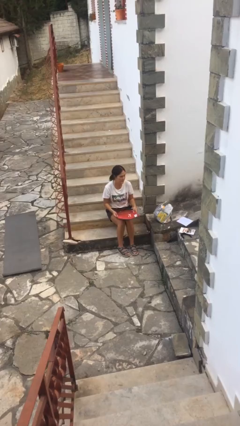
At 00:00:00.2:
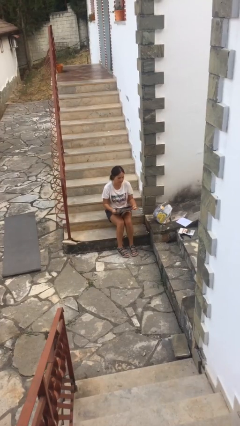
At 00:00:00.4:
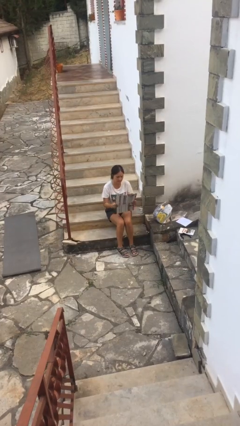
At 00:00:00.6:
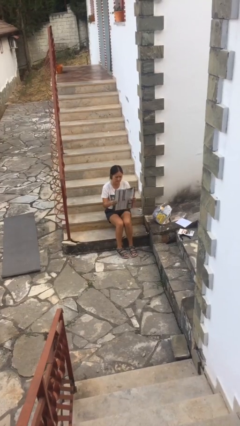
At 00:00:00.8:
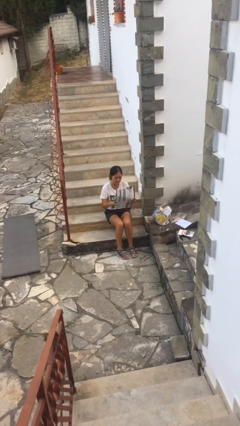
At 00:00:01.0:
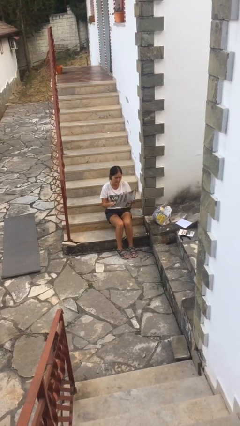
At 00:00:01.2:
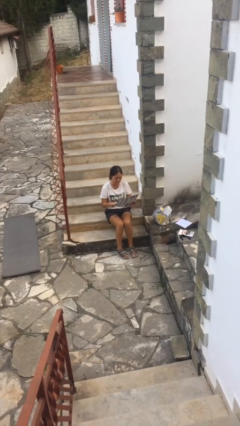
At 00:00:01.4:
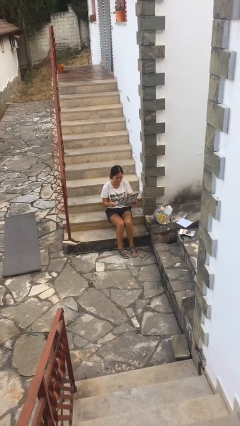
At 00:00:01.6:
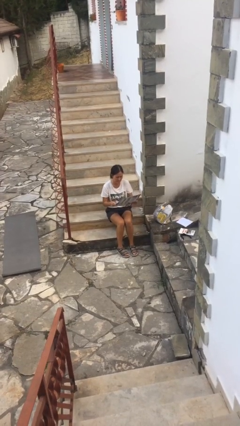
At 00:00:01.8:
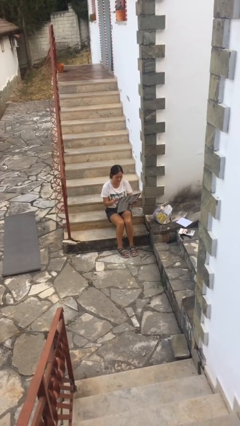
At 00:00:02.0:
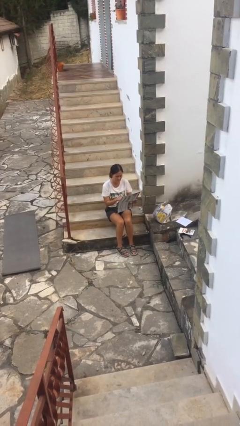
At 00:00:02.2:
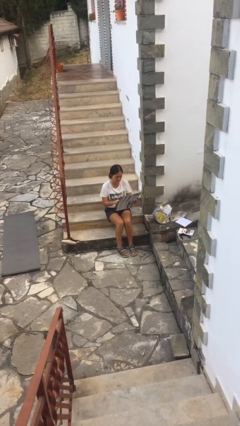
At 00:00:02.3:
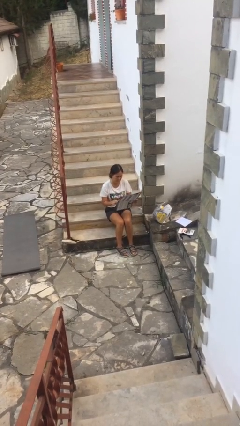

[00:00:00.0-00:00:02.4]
person reads newspaper

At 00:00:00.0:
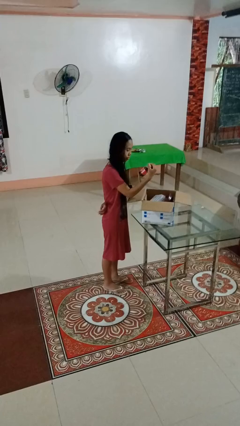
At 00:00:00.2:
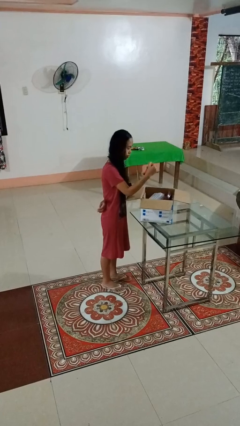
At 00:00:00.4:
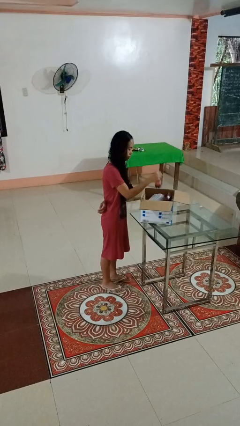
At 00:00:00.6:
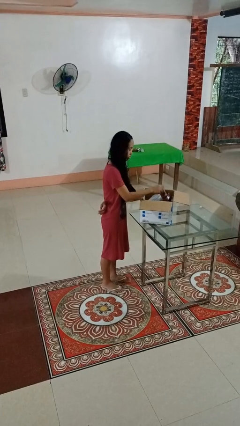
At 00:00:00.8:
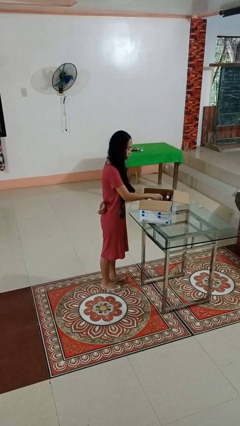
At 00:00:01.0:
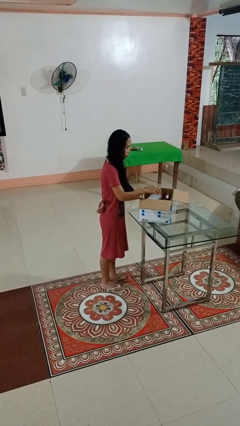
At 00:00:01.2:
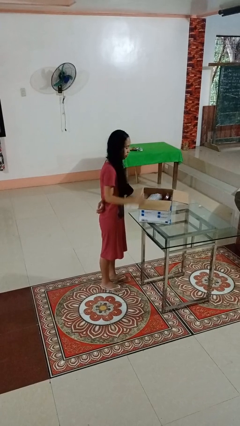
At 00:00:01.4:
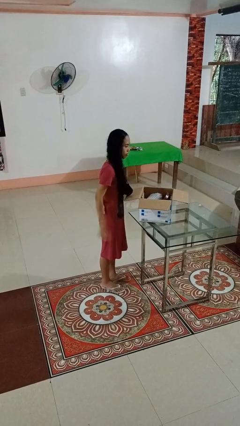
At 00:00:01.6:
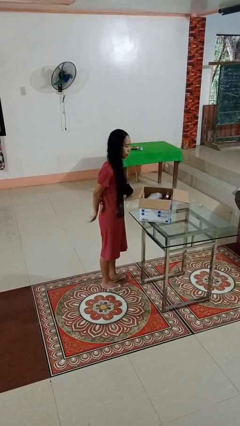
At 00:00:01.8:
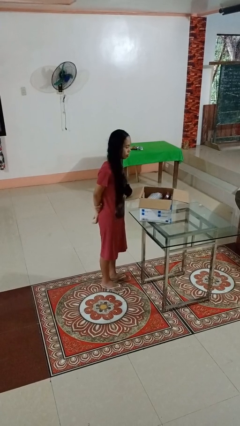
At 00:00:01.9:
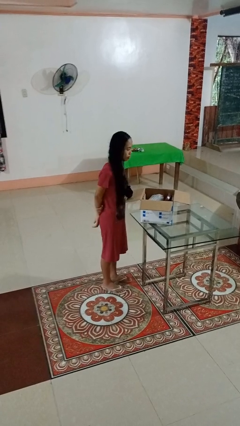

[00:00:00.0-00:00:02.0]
person puts object into box

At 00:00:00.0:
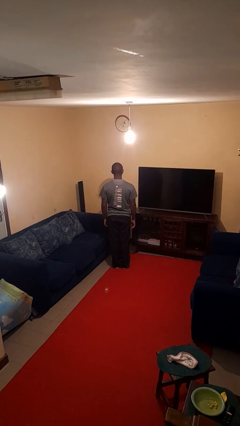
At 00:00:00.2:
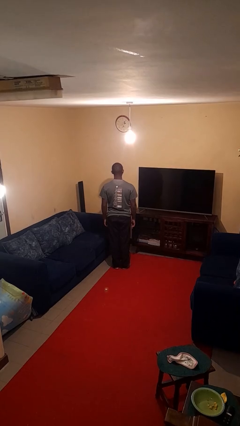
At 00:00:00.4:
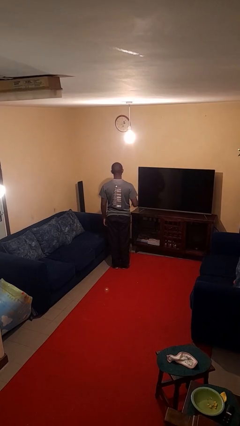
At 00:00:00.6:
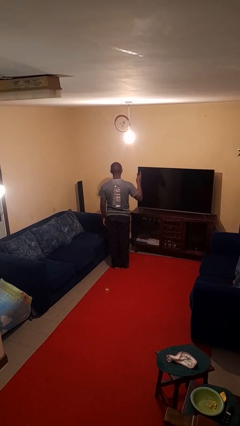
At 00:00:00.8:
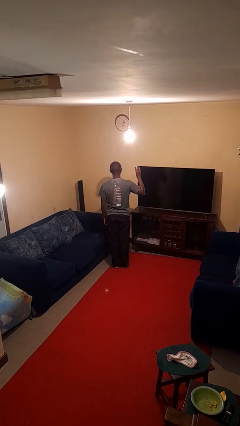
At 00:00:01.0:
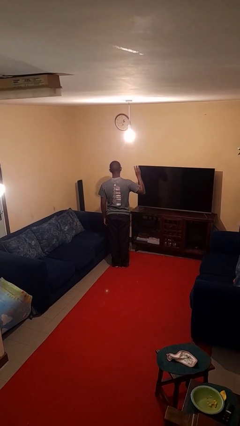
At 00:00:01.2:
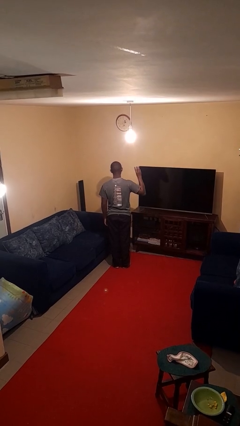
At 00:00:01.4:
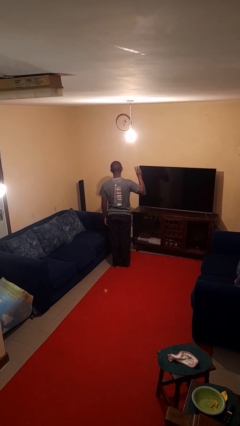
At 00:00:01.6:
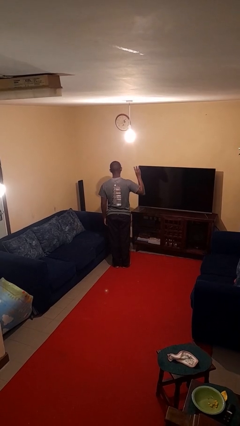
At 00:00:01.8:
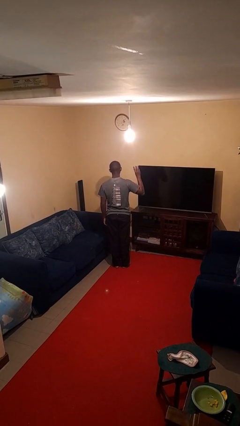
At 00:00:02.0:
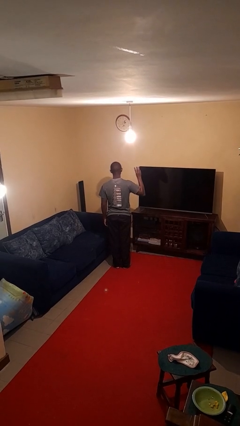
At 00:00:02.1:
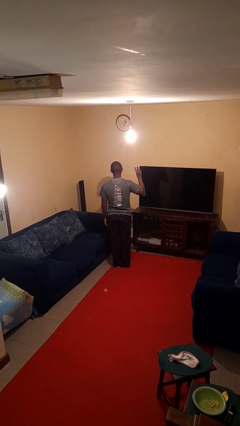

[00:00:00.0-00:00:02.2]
person gestures number three

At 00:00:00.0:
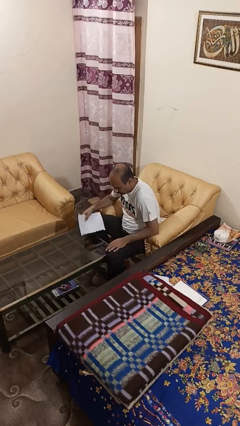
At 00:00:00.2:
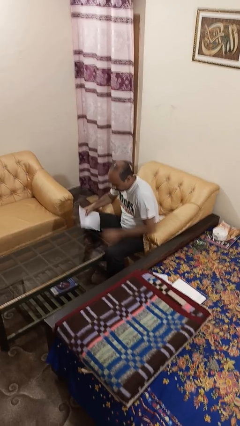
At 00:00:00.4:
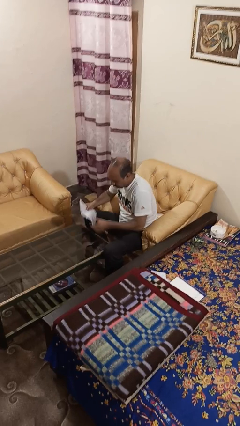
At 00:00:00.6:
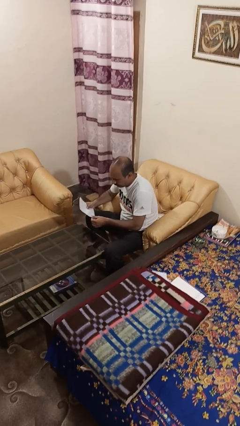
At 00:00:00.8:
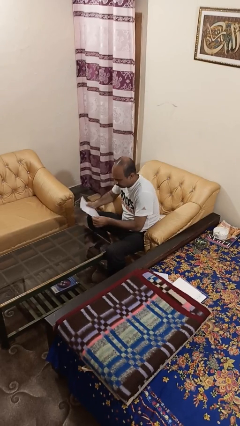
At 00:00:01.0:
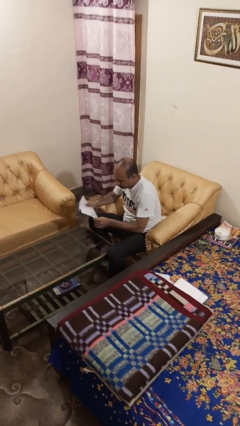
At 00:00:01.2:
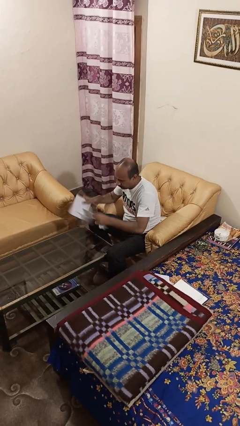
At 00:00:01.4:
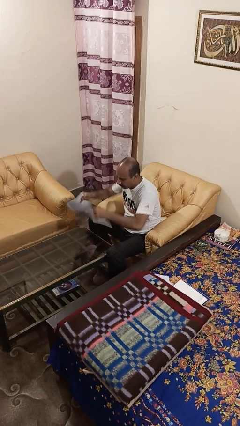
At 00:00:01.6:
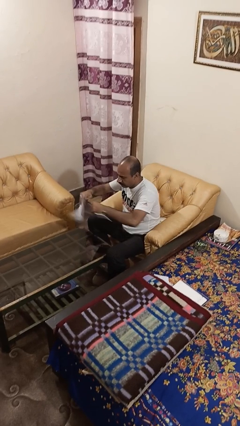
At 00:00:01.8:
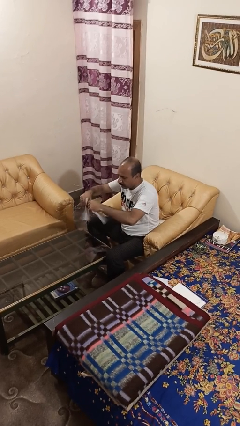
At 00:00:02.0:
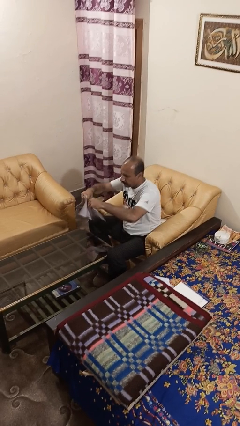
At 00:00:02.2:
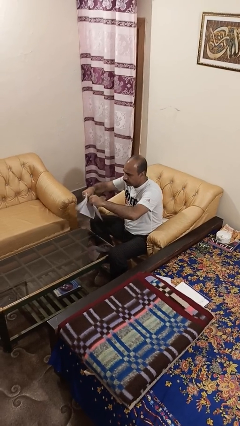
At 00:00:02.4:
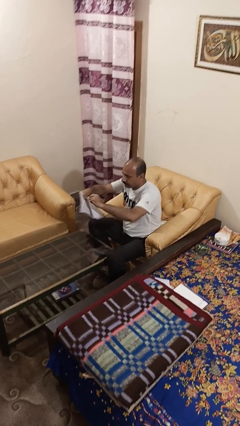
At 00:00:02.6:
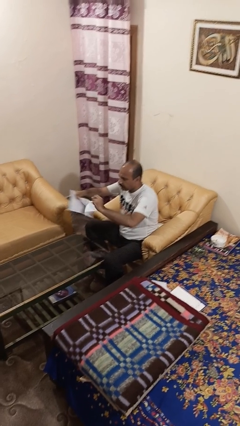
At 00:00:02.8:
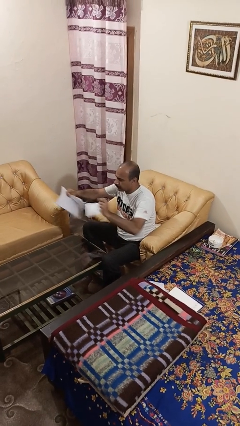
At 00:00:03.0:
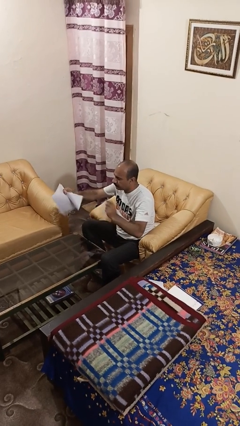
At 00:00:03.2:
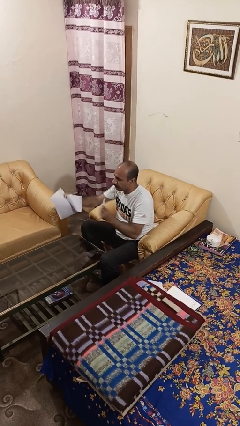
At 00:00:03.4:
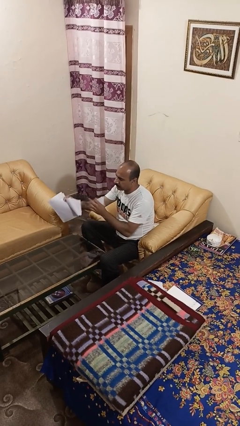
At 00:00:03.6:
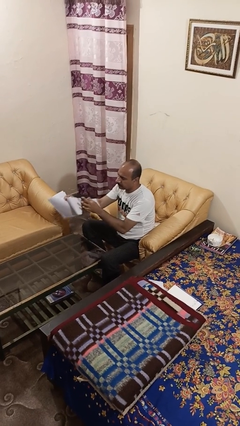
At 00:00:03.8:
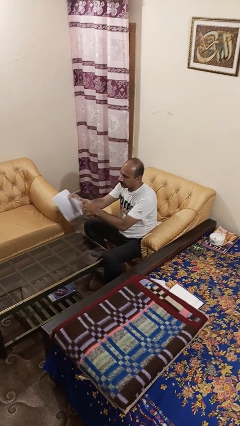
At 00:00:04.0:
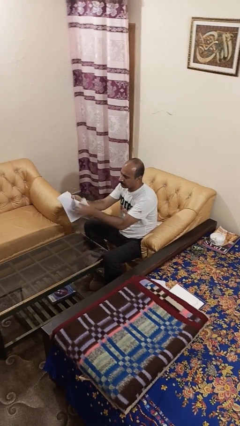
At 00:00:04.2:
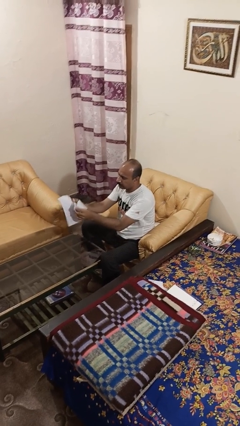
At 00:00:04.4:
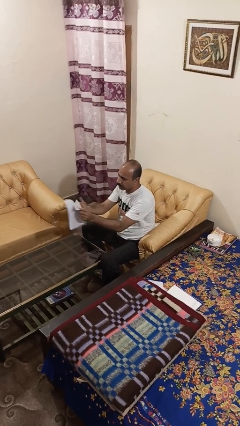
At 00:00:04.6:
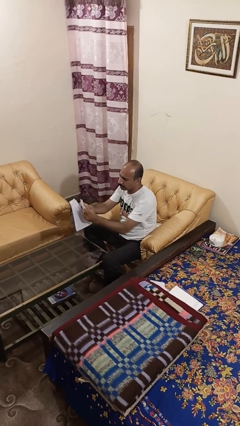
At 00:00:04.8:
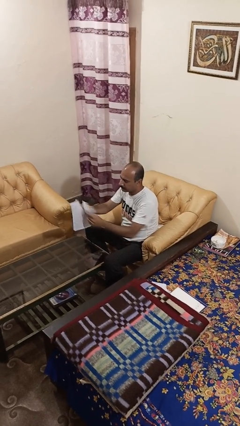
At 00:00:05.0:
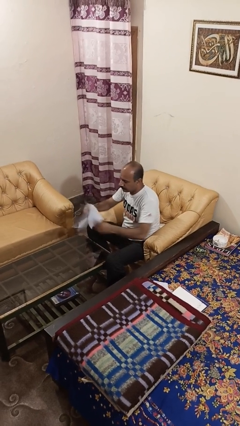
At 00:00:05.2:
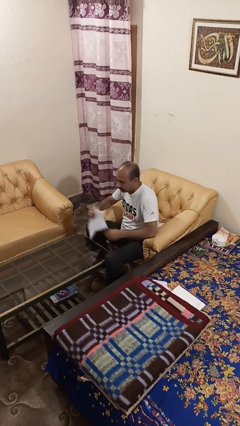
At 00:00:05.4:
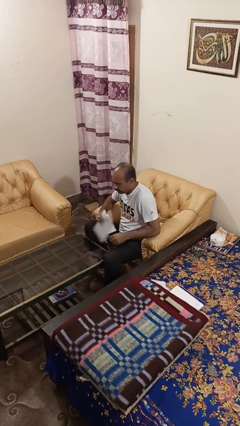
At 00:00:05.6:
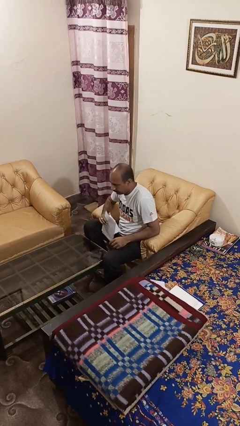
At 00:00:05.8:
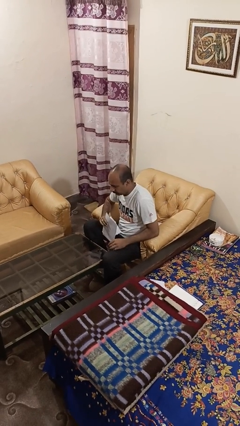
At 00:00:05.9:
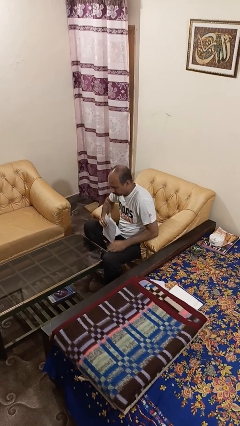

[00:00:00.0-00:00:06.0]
person tears paper

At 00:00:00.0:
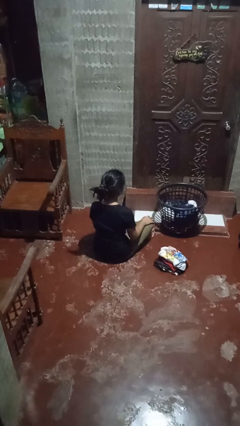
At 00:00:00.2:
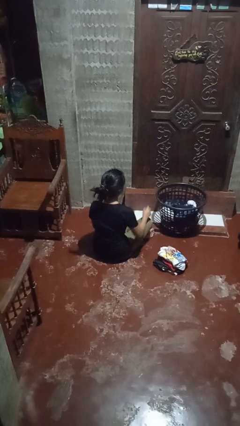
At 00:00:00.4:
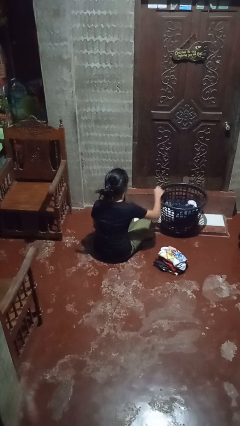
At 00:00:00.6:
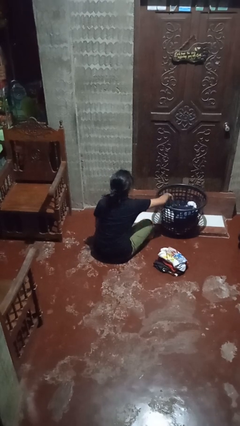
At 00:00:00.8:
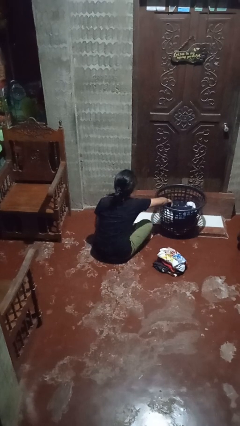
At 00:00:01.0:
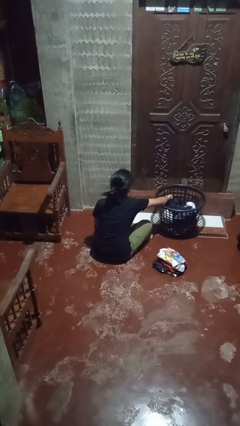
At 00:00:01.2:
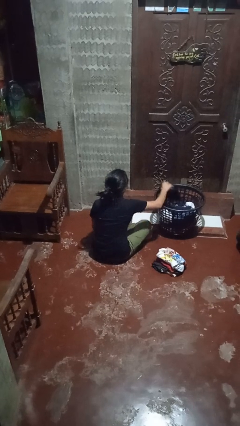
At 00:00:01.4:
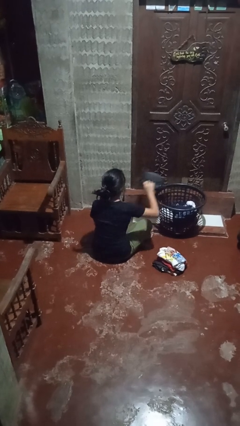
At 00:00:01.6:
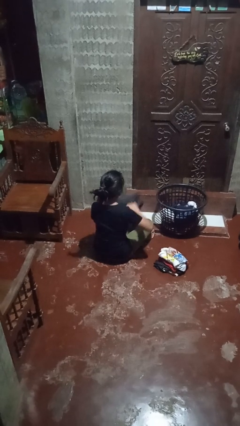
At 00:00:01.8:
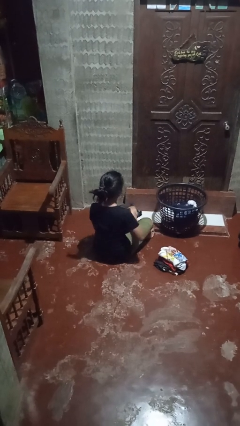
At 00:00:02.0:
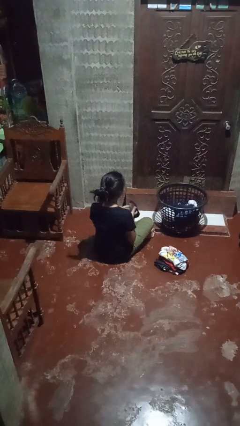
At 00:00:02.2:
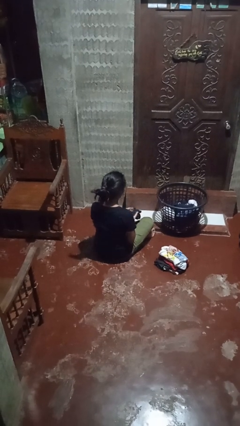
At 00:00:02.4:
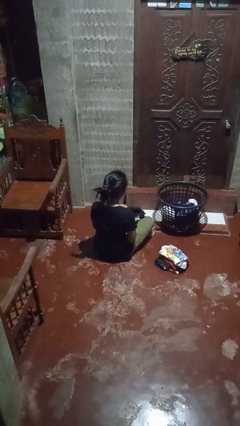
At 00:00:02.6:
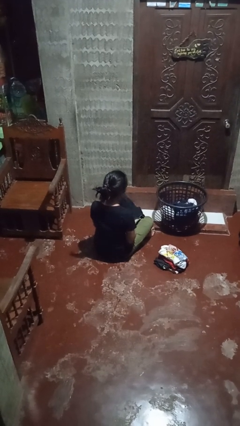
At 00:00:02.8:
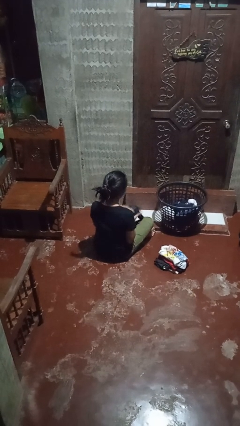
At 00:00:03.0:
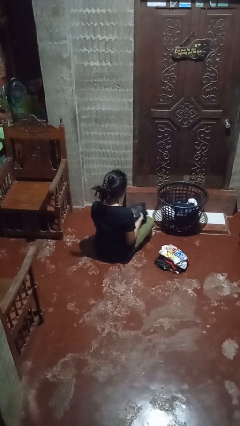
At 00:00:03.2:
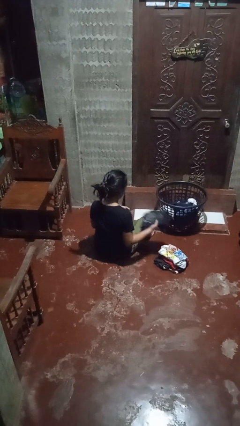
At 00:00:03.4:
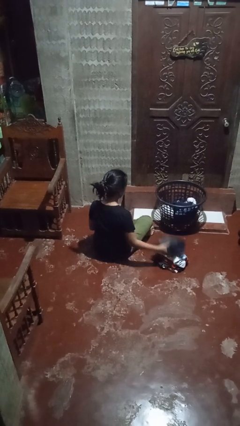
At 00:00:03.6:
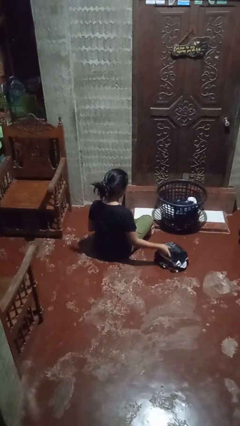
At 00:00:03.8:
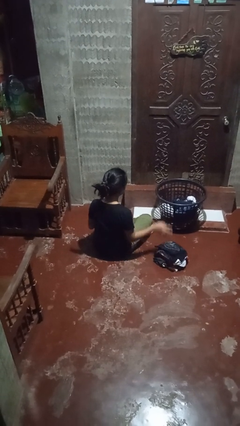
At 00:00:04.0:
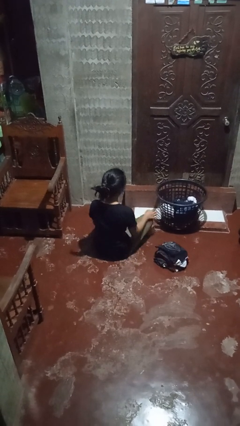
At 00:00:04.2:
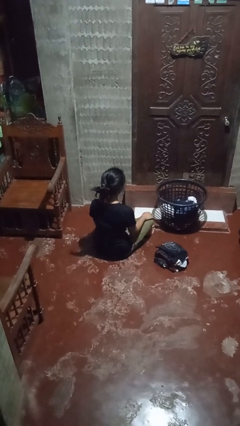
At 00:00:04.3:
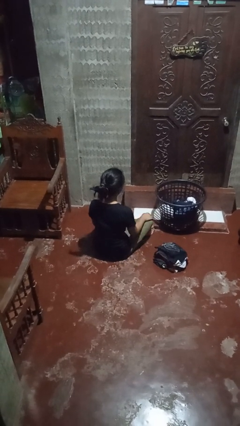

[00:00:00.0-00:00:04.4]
person folds shirt

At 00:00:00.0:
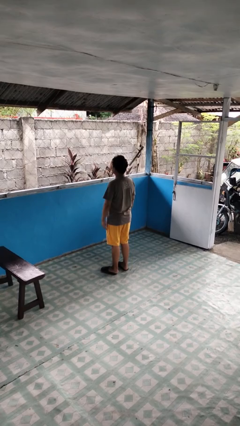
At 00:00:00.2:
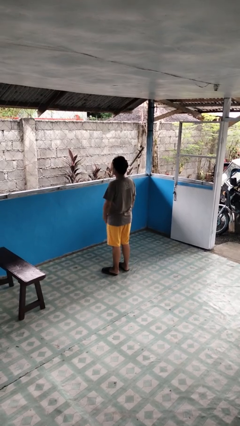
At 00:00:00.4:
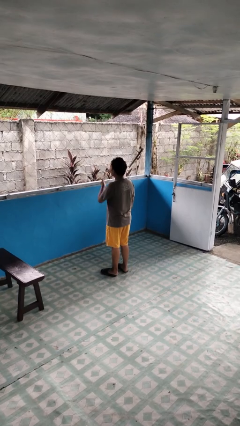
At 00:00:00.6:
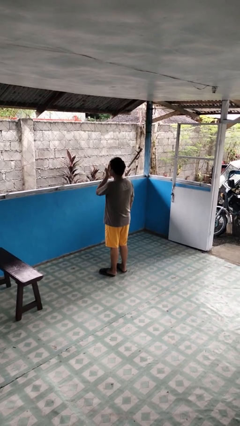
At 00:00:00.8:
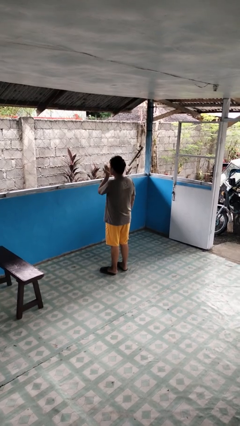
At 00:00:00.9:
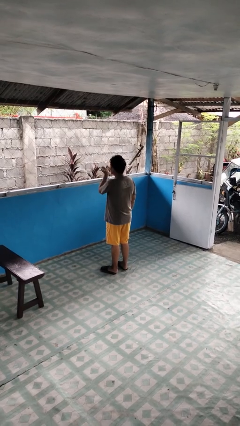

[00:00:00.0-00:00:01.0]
person gestures blow kiss
